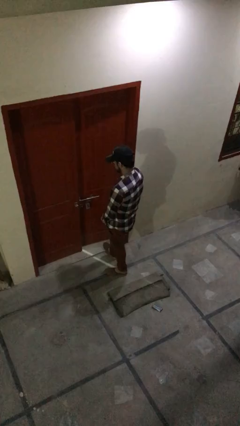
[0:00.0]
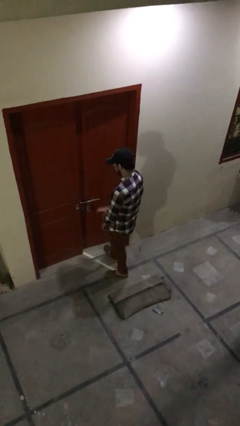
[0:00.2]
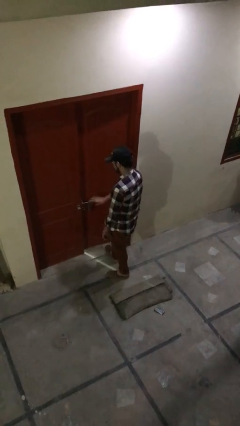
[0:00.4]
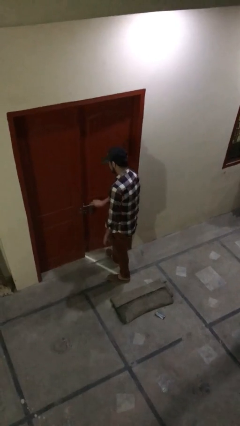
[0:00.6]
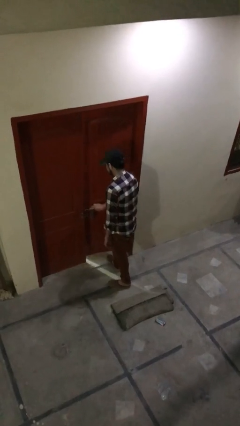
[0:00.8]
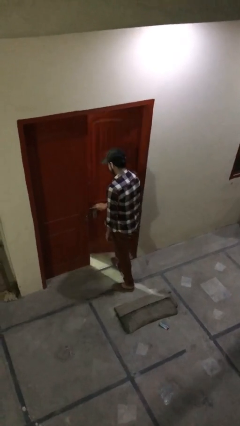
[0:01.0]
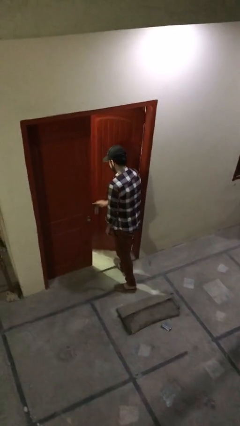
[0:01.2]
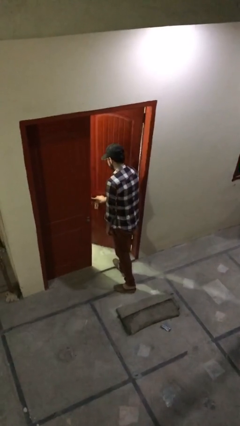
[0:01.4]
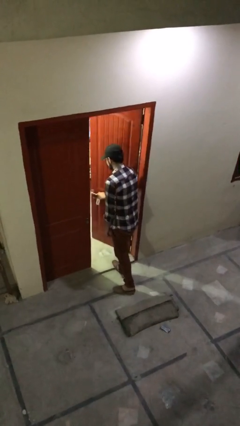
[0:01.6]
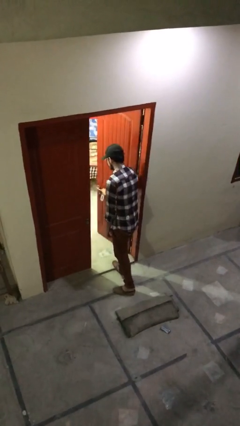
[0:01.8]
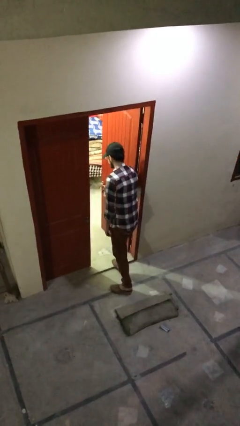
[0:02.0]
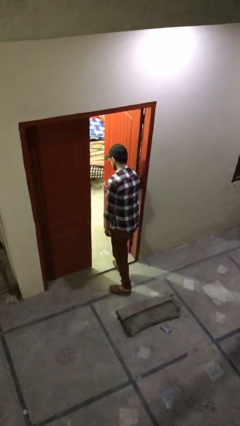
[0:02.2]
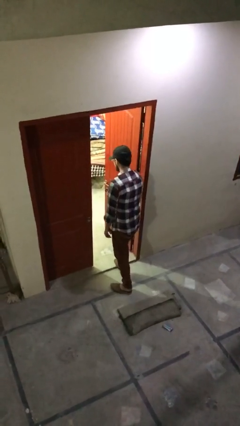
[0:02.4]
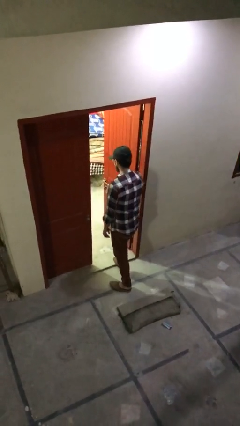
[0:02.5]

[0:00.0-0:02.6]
person opens facility door

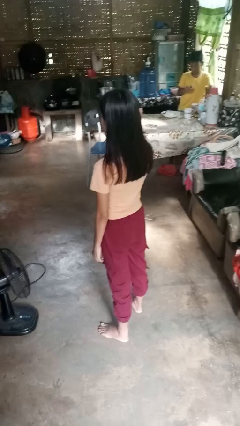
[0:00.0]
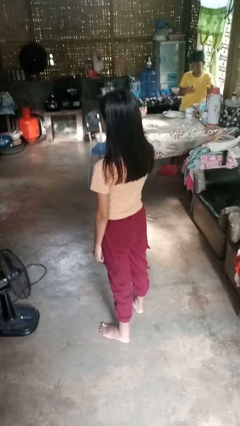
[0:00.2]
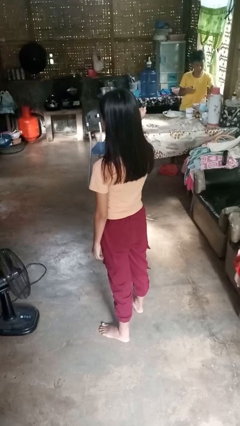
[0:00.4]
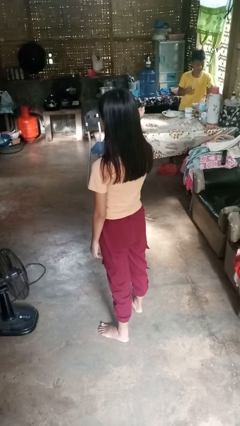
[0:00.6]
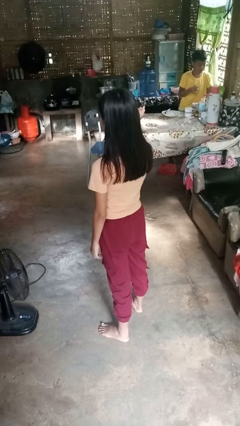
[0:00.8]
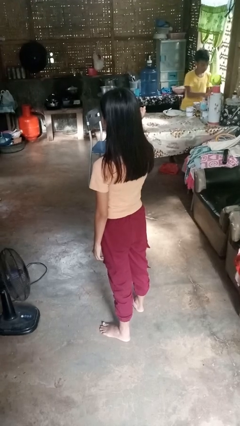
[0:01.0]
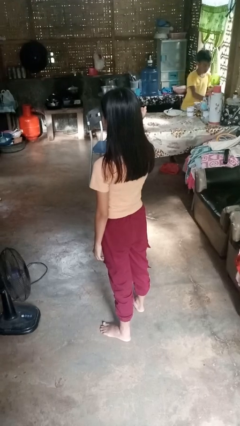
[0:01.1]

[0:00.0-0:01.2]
person snaps fingers

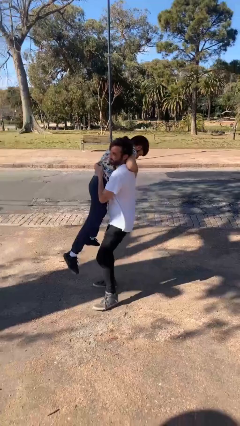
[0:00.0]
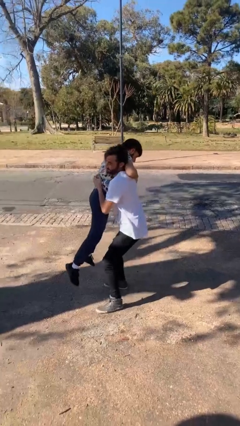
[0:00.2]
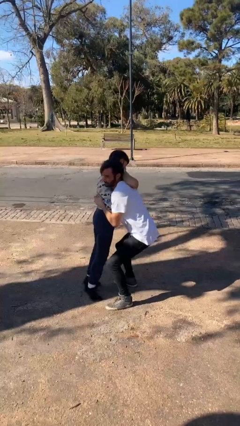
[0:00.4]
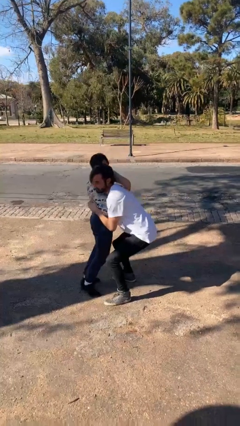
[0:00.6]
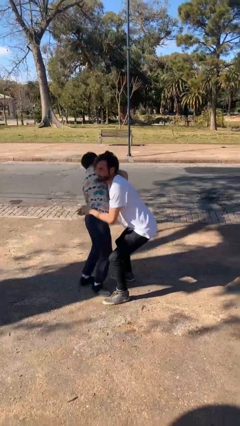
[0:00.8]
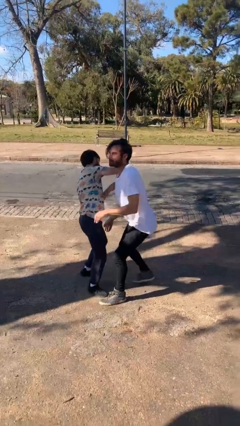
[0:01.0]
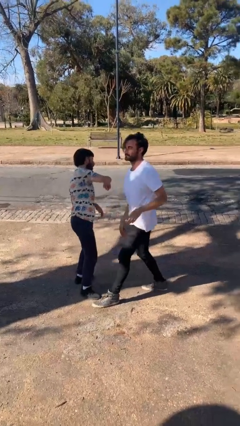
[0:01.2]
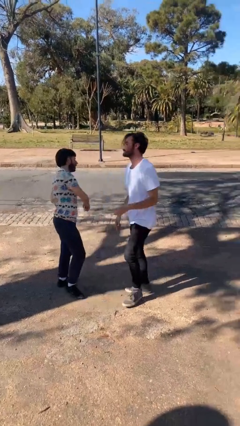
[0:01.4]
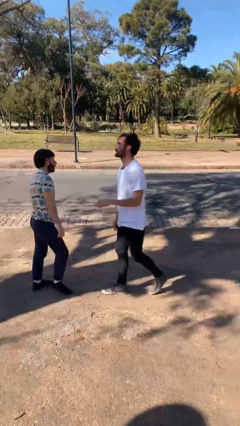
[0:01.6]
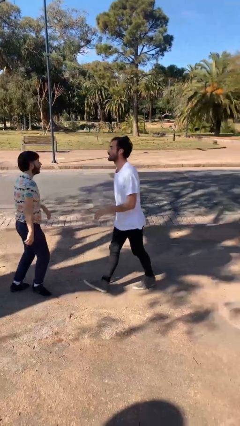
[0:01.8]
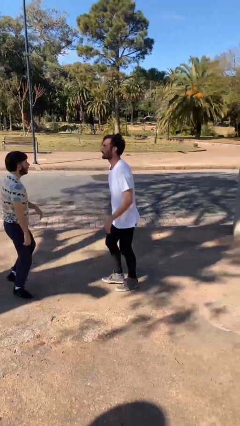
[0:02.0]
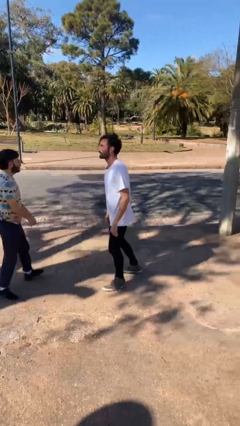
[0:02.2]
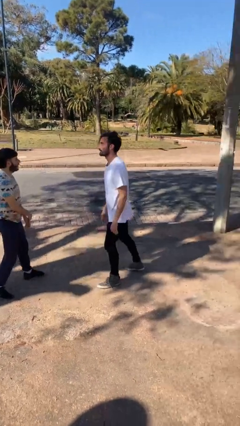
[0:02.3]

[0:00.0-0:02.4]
person puts down person

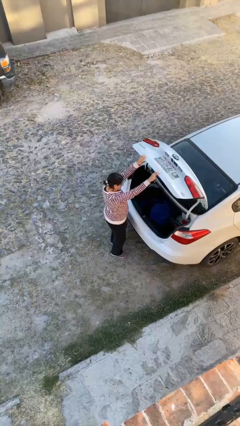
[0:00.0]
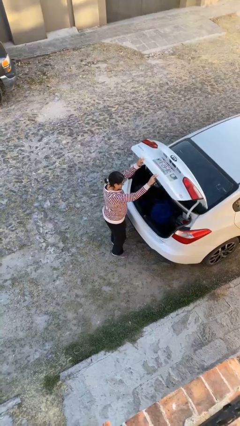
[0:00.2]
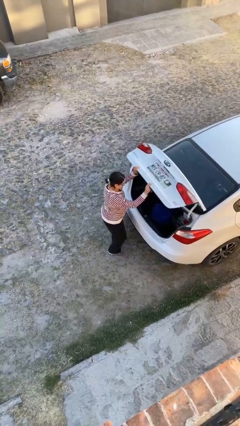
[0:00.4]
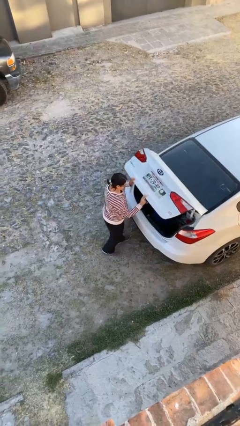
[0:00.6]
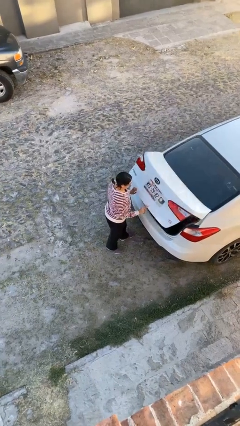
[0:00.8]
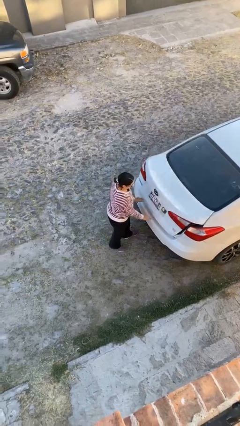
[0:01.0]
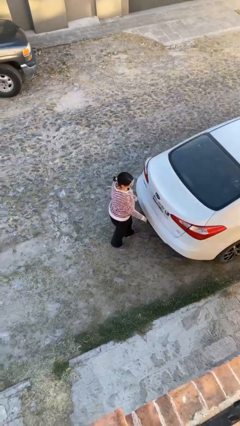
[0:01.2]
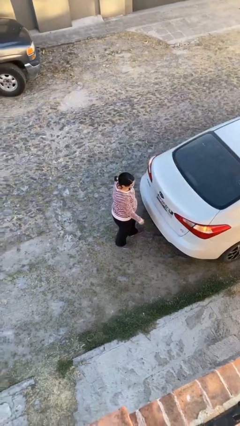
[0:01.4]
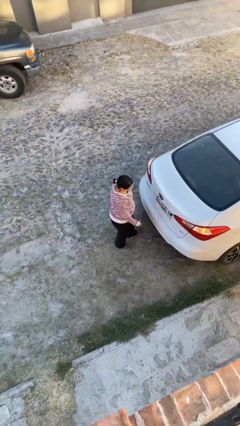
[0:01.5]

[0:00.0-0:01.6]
person closes car trunk

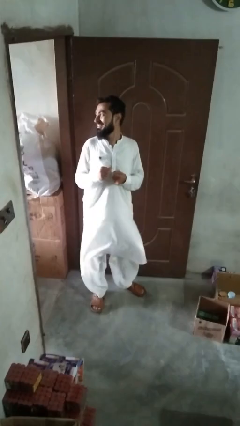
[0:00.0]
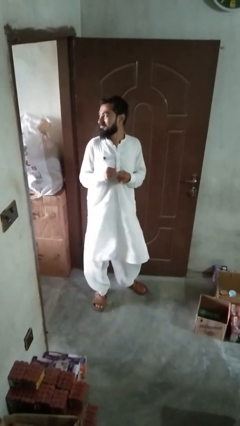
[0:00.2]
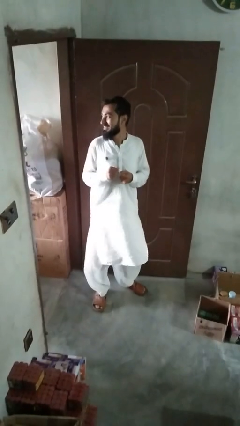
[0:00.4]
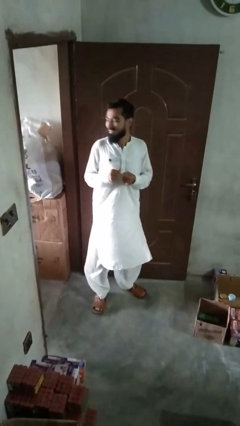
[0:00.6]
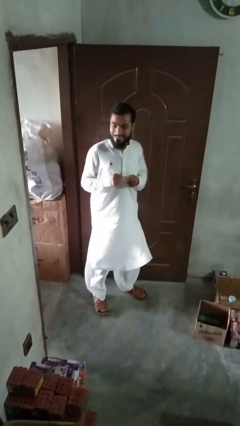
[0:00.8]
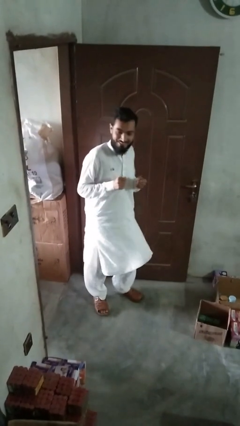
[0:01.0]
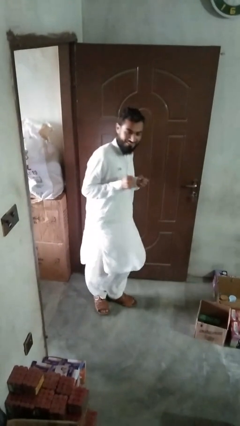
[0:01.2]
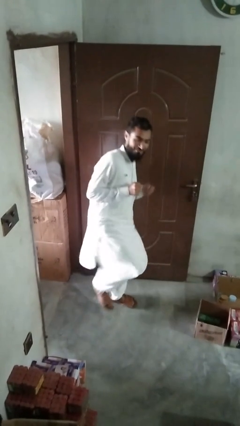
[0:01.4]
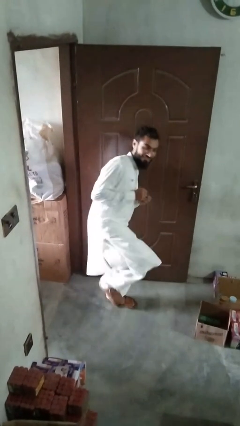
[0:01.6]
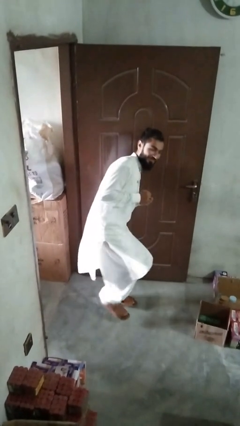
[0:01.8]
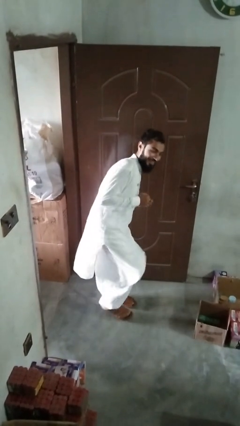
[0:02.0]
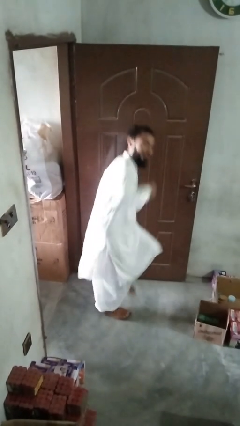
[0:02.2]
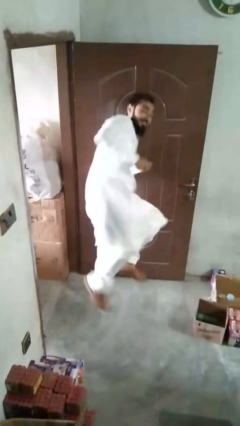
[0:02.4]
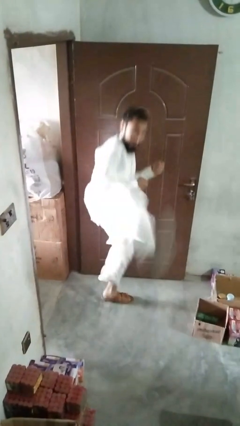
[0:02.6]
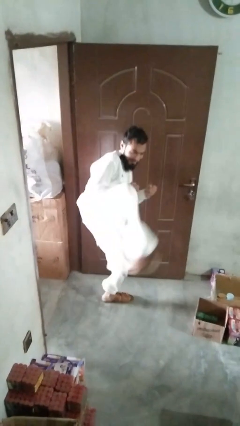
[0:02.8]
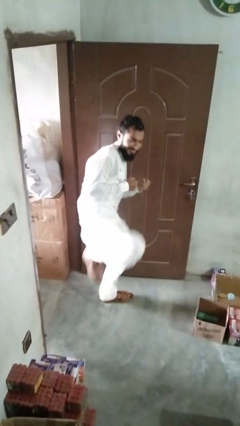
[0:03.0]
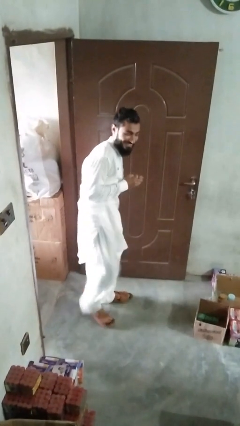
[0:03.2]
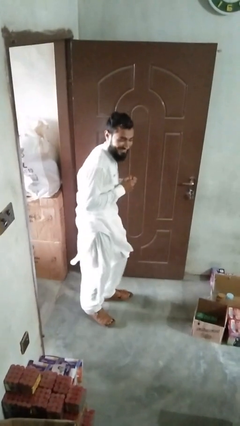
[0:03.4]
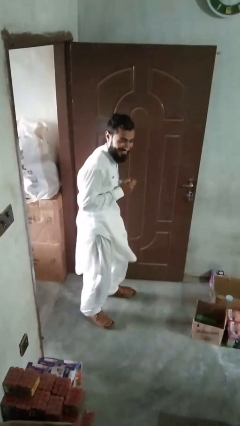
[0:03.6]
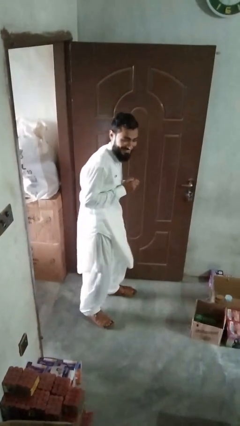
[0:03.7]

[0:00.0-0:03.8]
person karate kicks

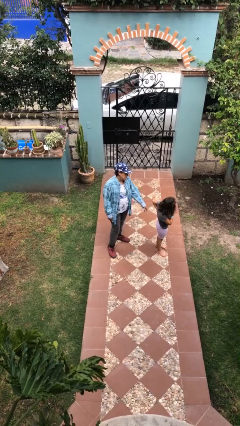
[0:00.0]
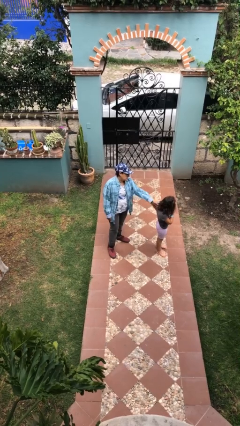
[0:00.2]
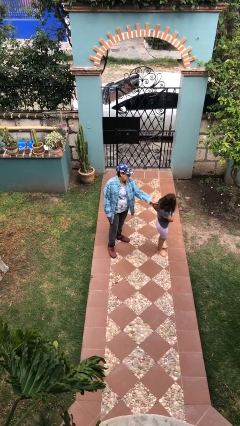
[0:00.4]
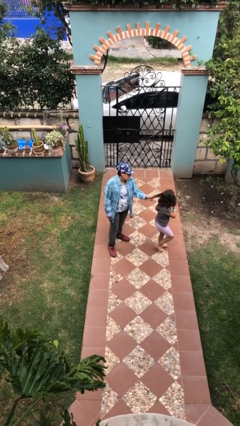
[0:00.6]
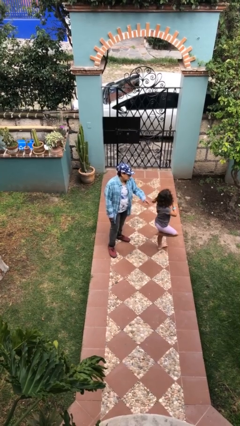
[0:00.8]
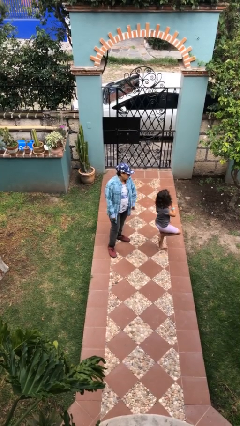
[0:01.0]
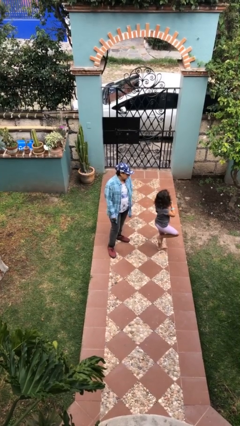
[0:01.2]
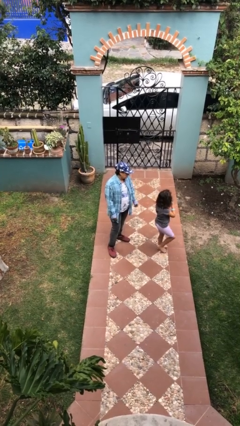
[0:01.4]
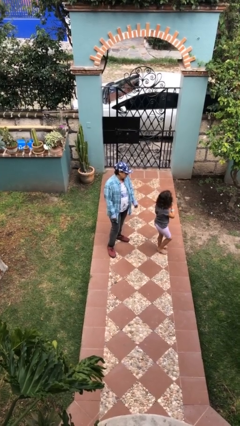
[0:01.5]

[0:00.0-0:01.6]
person grabs person by hair

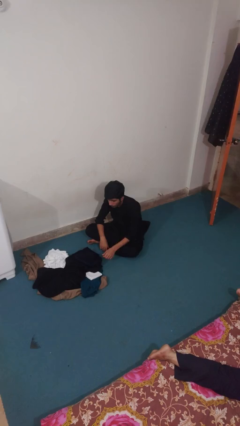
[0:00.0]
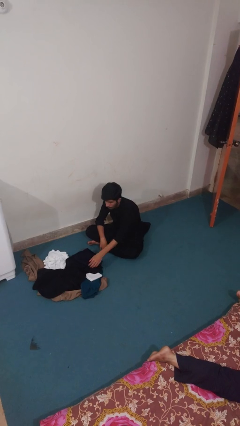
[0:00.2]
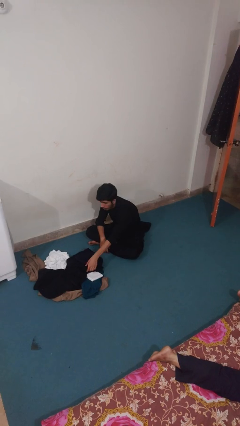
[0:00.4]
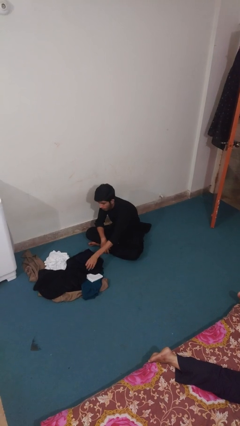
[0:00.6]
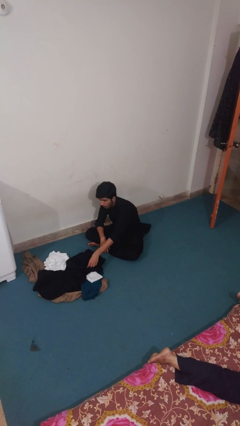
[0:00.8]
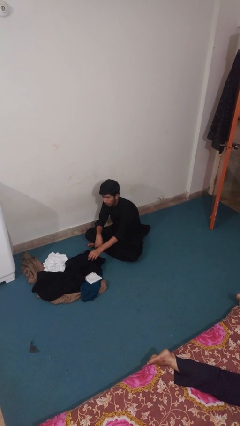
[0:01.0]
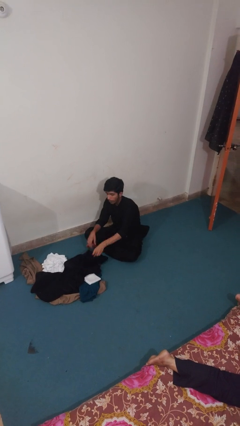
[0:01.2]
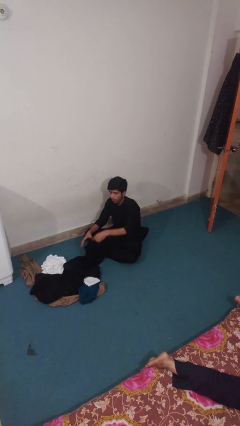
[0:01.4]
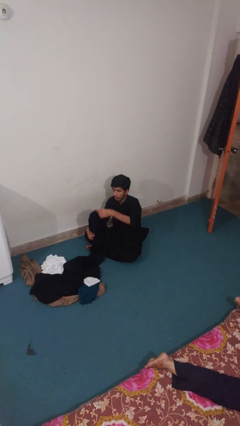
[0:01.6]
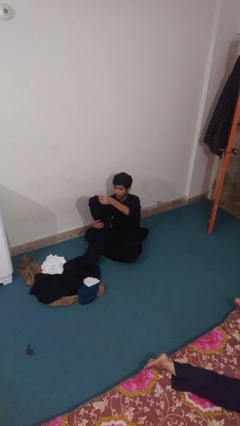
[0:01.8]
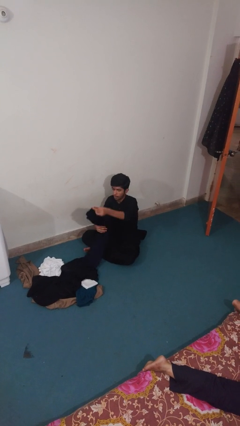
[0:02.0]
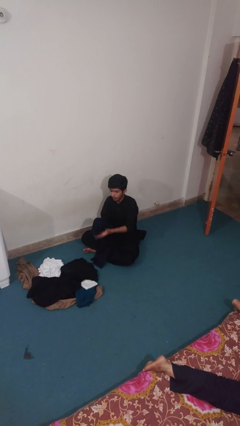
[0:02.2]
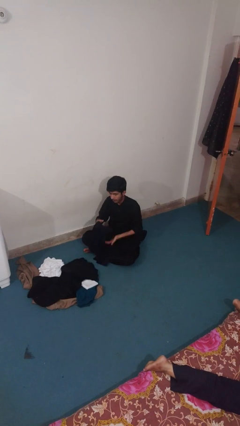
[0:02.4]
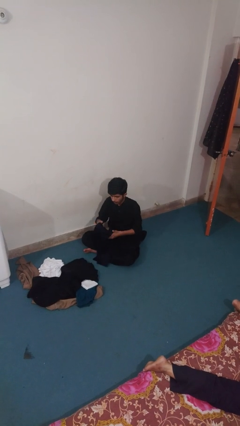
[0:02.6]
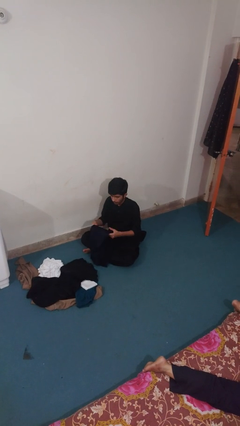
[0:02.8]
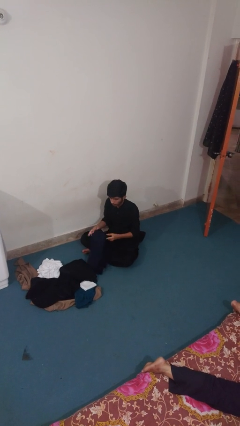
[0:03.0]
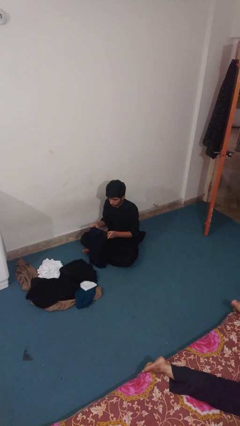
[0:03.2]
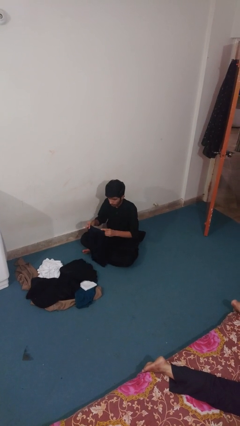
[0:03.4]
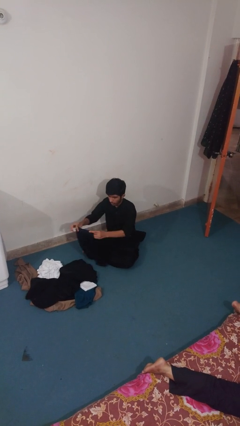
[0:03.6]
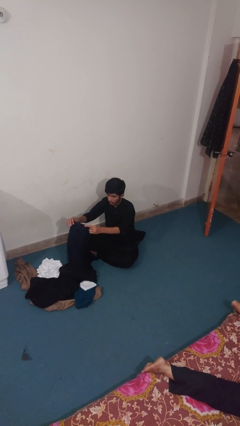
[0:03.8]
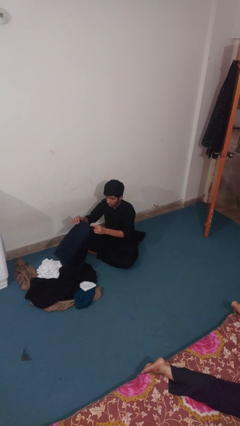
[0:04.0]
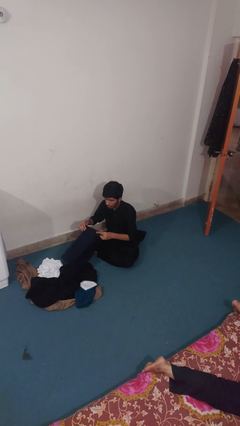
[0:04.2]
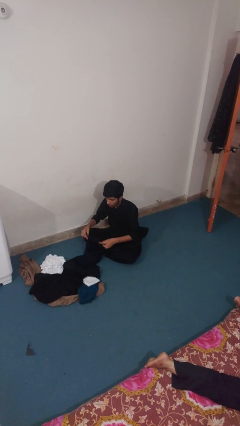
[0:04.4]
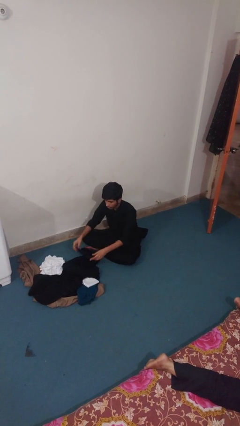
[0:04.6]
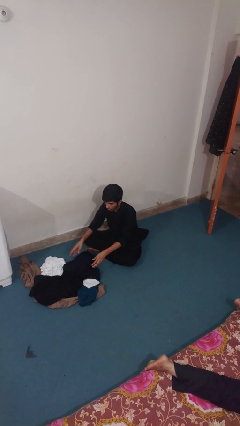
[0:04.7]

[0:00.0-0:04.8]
person folds pants
